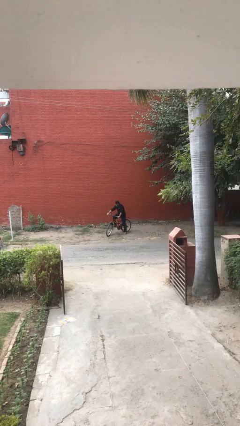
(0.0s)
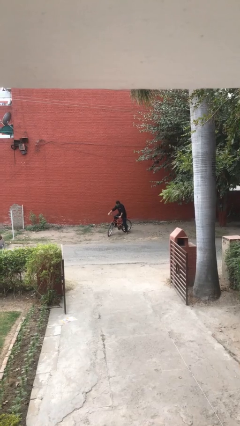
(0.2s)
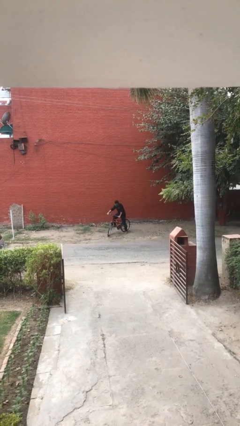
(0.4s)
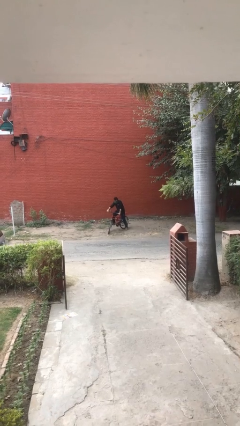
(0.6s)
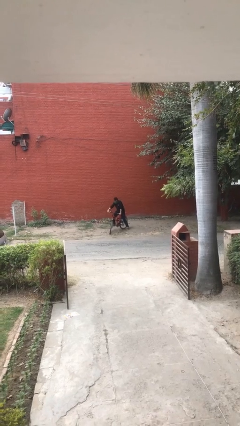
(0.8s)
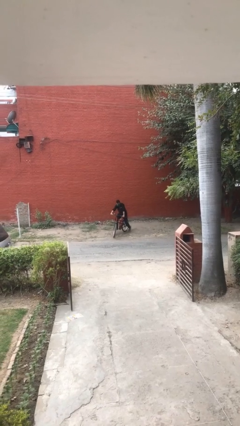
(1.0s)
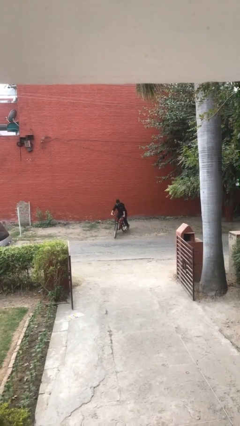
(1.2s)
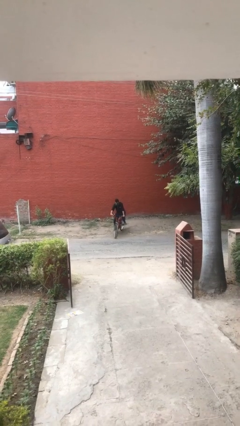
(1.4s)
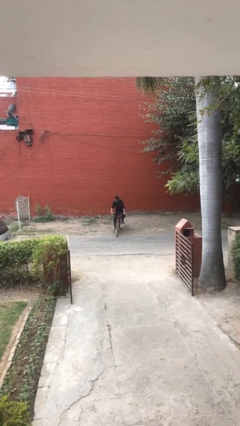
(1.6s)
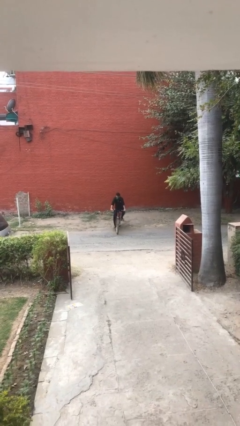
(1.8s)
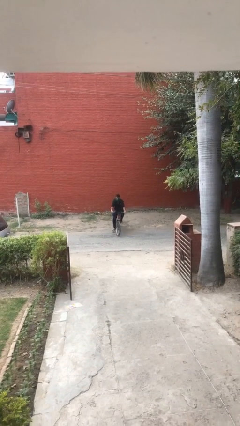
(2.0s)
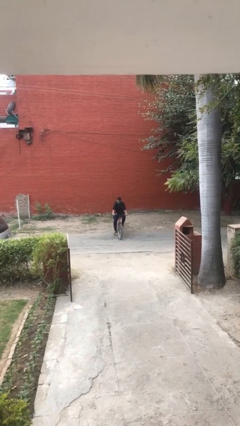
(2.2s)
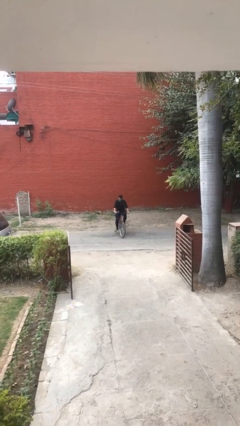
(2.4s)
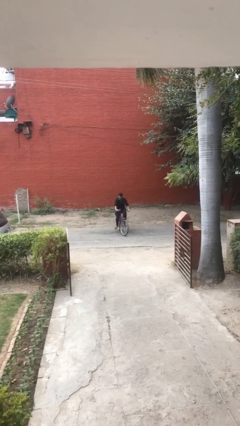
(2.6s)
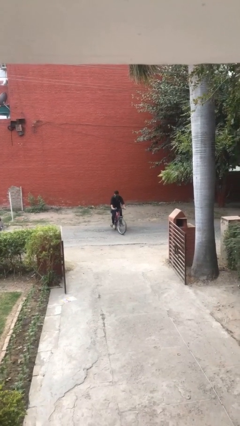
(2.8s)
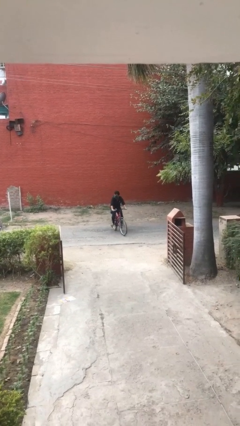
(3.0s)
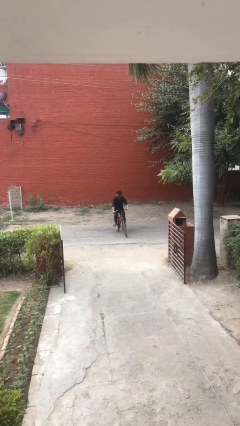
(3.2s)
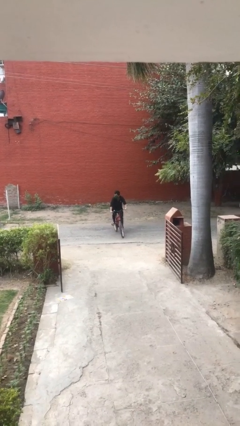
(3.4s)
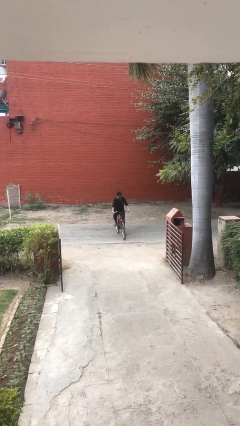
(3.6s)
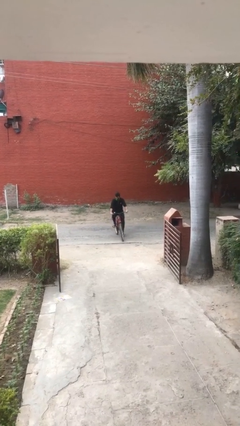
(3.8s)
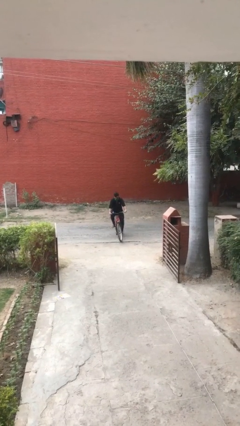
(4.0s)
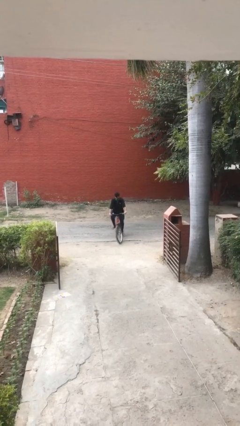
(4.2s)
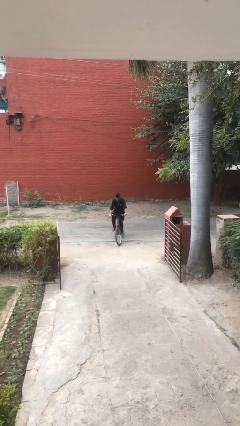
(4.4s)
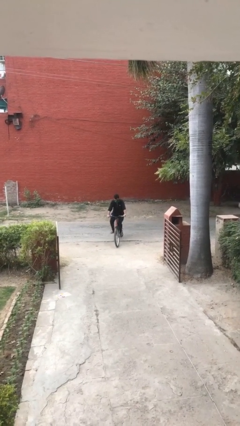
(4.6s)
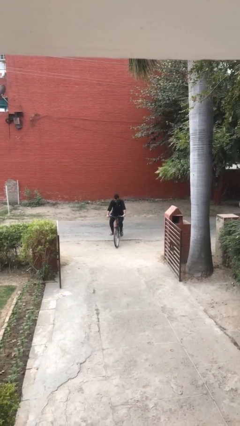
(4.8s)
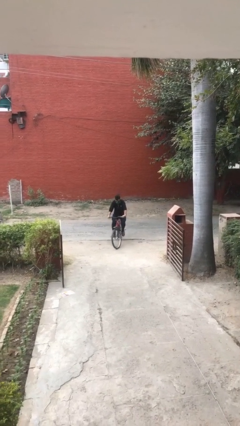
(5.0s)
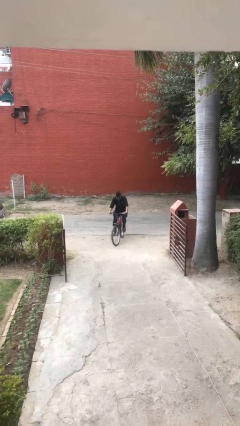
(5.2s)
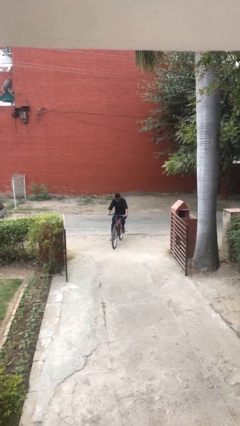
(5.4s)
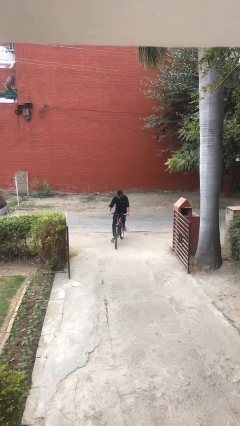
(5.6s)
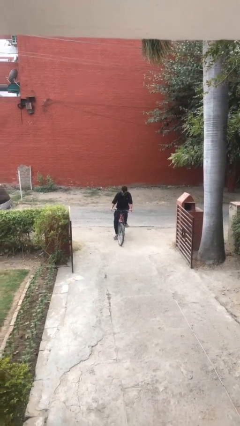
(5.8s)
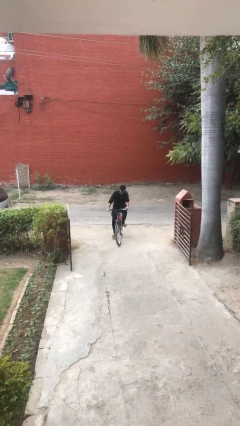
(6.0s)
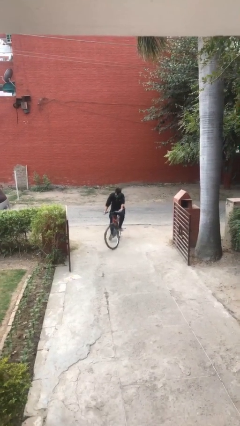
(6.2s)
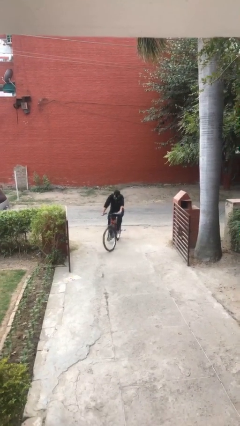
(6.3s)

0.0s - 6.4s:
person rides bicycle

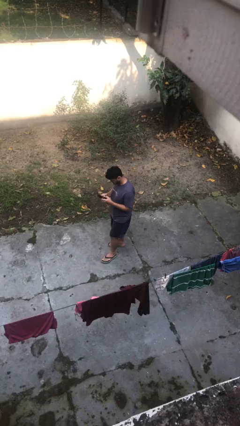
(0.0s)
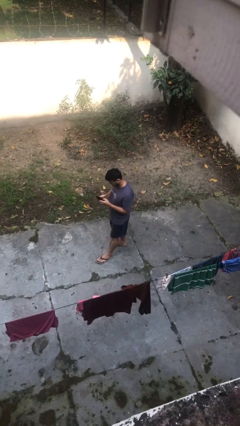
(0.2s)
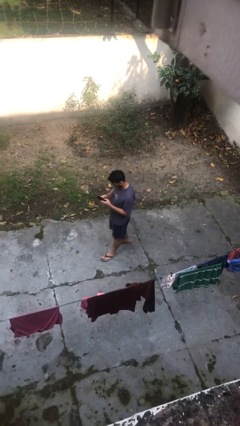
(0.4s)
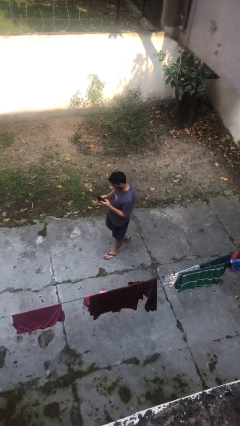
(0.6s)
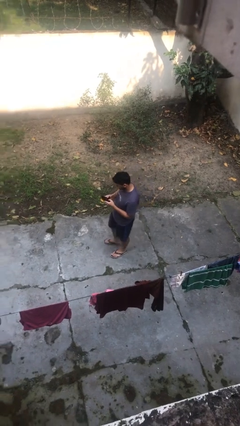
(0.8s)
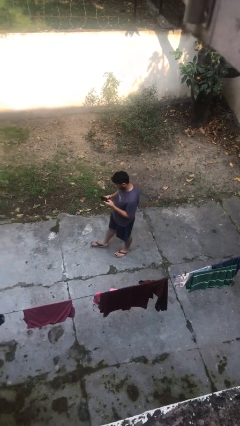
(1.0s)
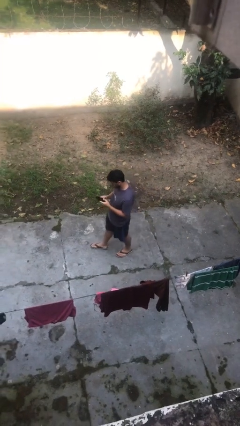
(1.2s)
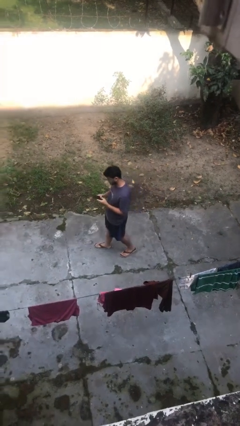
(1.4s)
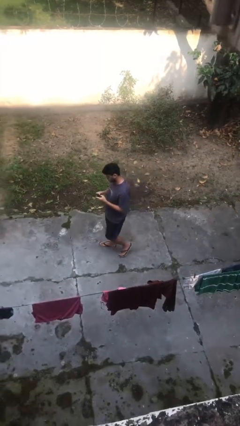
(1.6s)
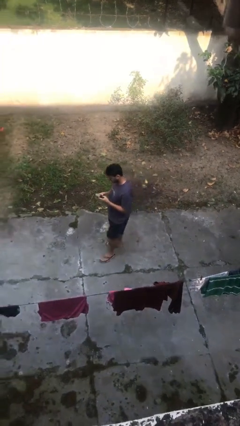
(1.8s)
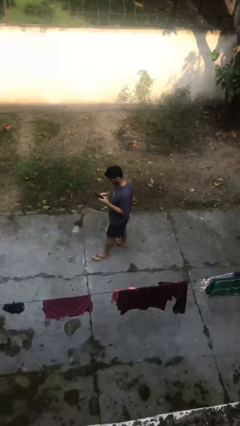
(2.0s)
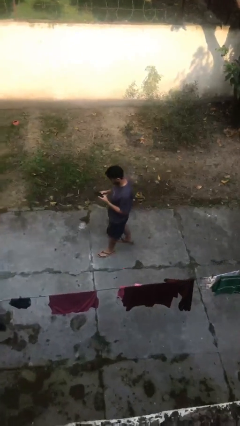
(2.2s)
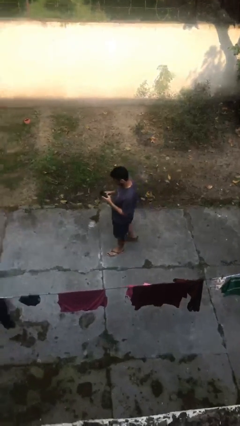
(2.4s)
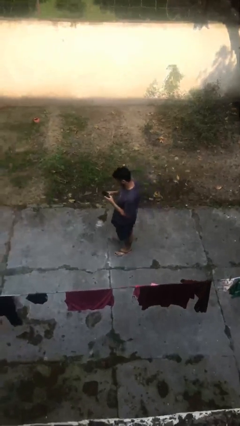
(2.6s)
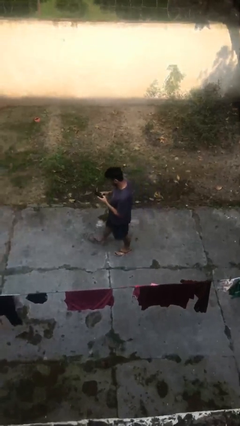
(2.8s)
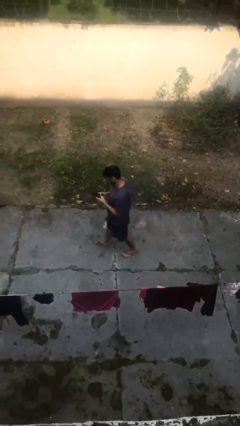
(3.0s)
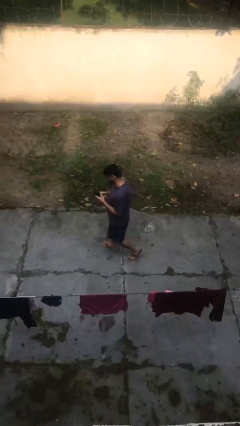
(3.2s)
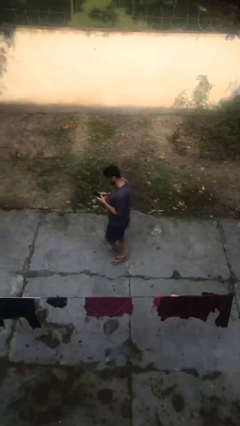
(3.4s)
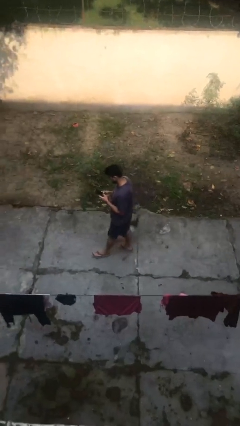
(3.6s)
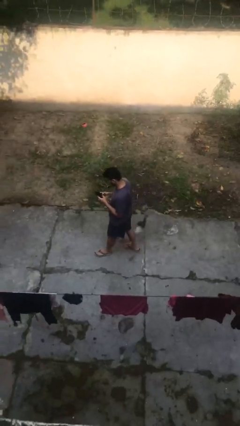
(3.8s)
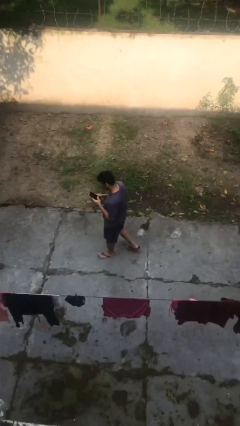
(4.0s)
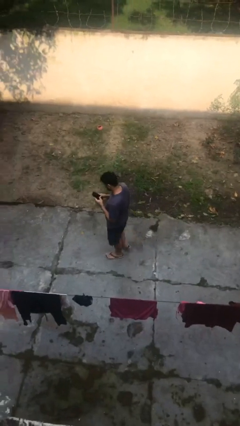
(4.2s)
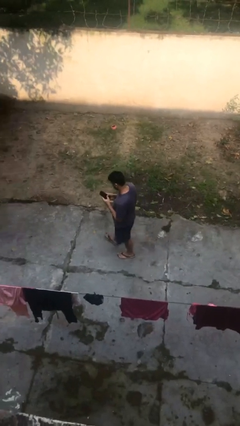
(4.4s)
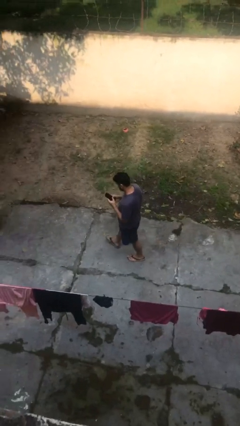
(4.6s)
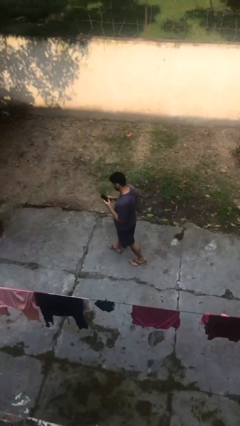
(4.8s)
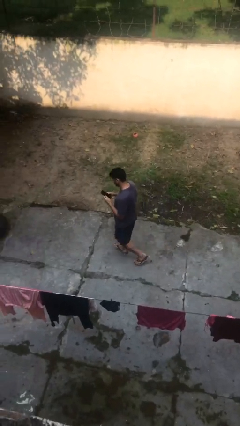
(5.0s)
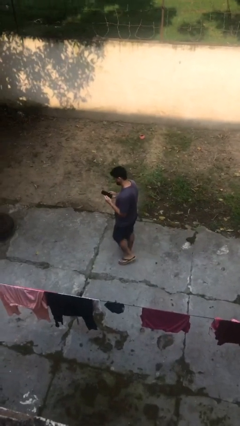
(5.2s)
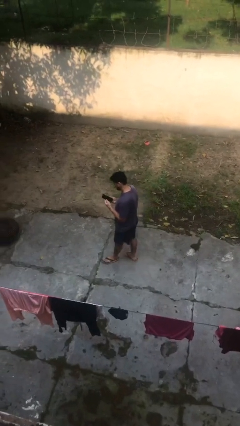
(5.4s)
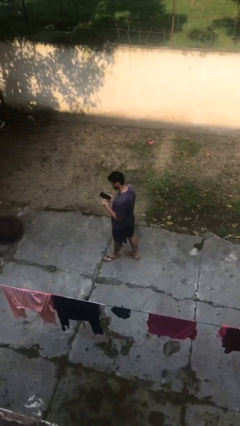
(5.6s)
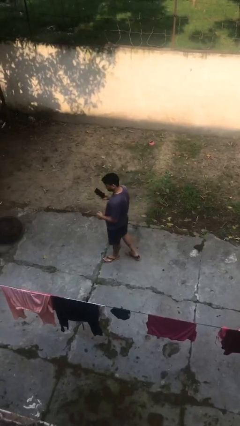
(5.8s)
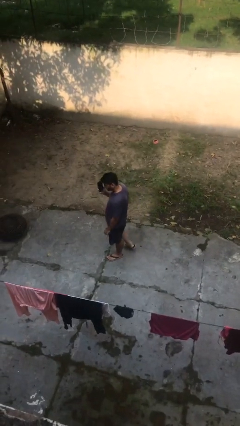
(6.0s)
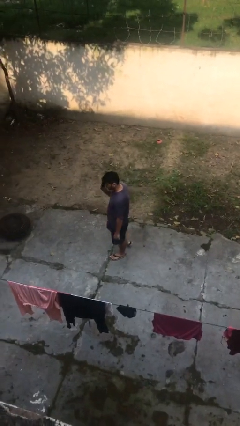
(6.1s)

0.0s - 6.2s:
person texts on phone

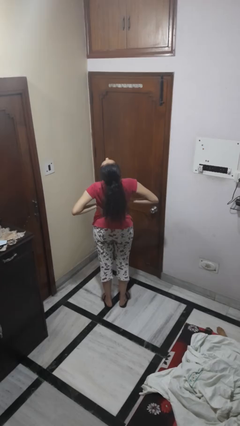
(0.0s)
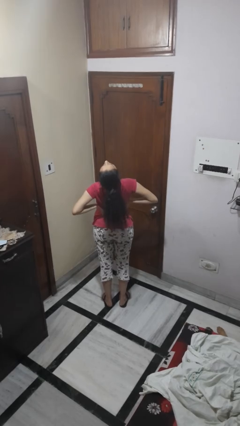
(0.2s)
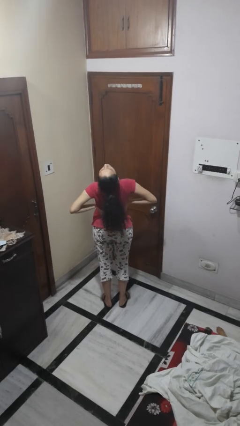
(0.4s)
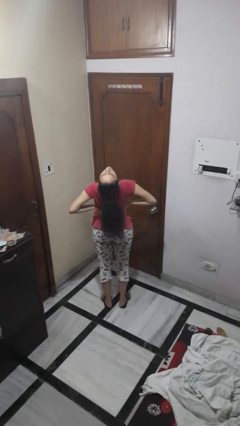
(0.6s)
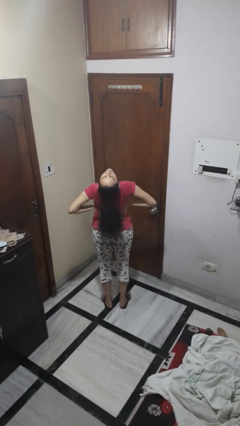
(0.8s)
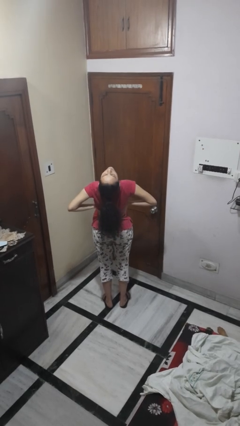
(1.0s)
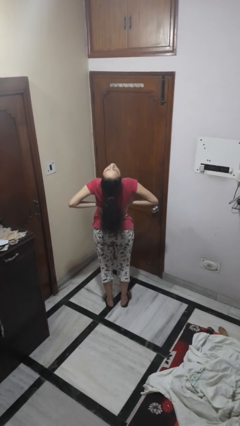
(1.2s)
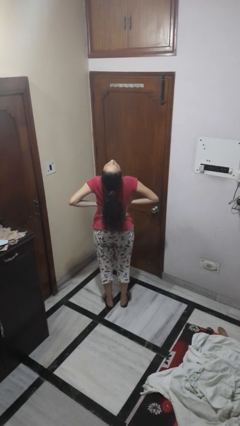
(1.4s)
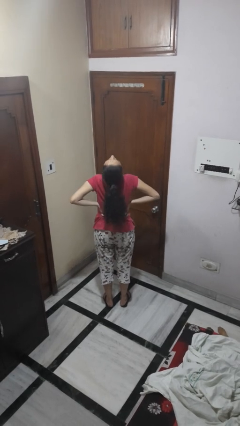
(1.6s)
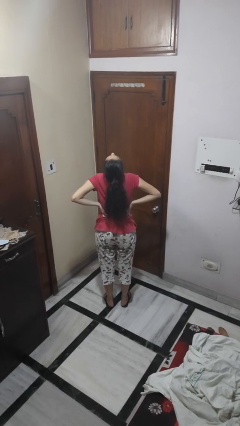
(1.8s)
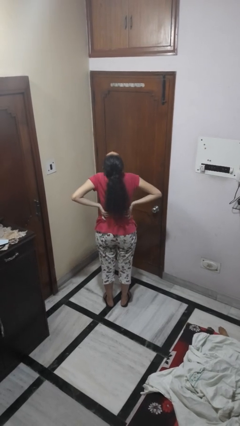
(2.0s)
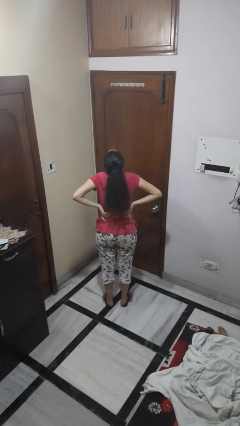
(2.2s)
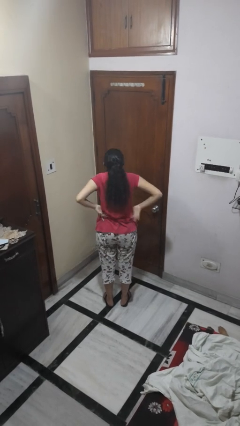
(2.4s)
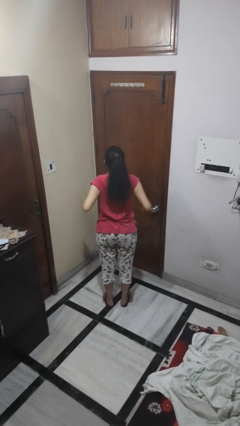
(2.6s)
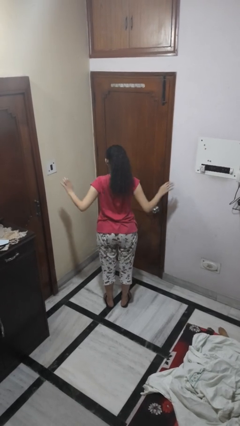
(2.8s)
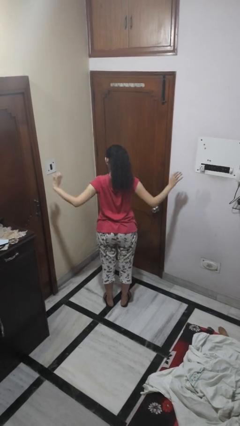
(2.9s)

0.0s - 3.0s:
person stretches back

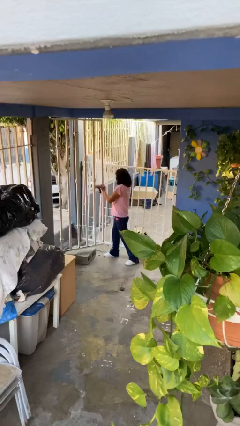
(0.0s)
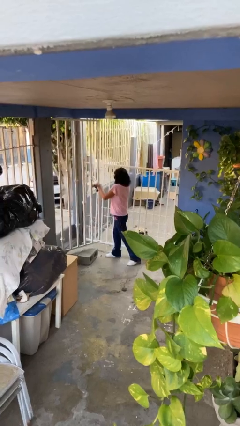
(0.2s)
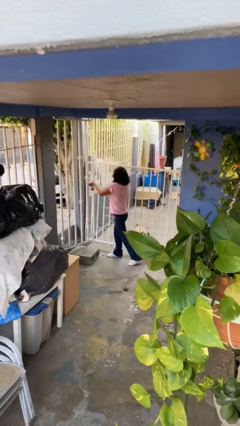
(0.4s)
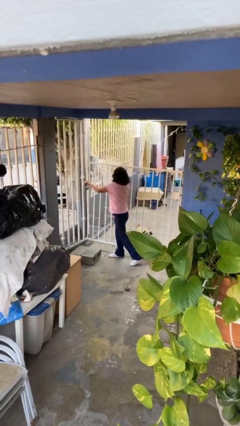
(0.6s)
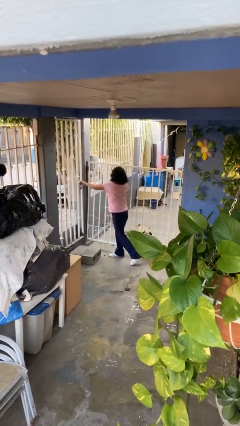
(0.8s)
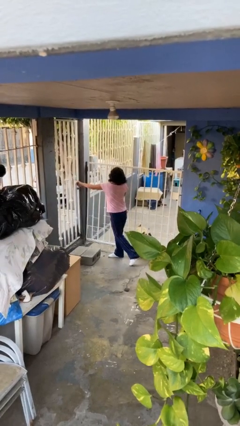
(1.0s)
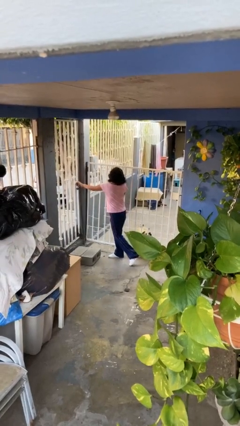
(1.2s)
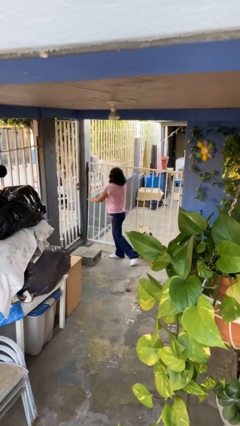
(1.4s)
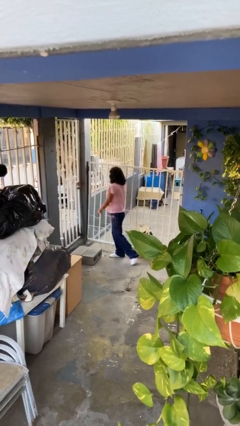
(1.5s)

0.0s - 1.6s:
person closes facility door

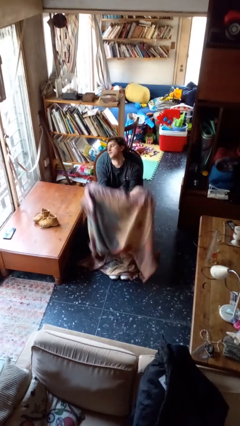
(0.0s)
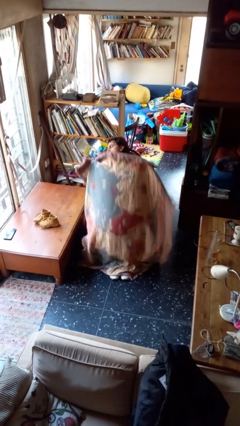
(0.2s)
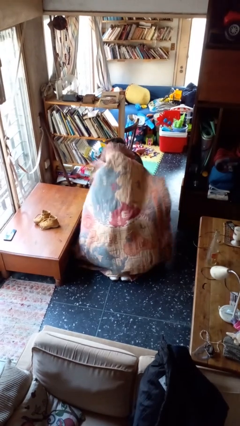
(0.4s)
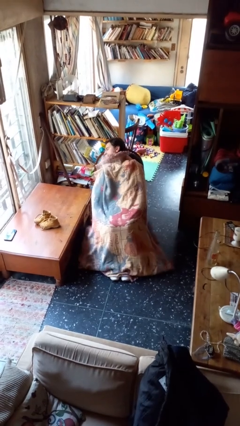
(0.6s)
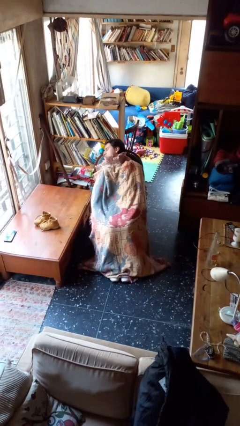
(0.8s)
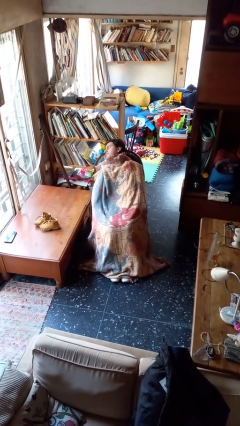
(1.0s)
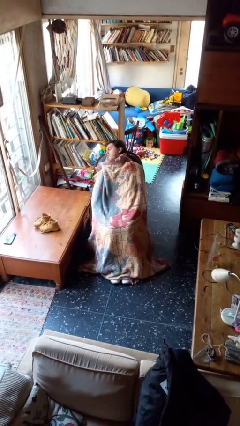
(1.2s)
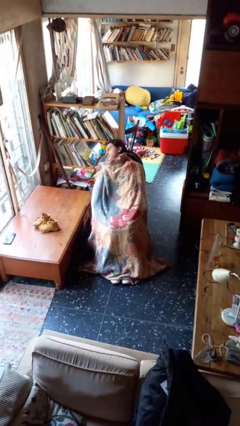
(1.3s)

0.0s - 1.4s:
person covers with blanket
